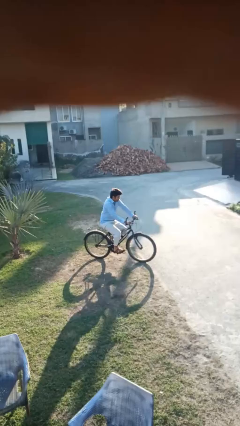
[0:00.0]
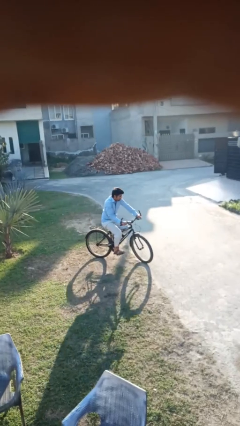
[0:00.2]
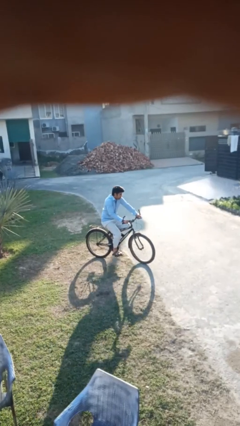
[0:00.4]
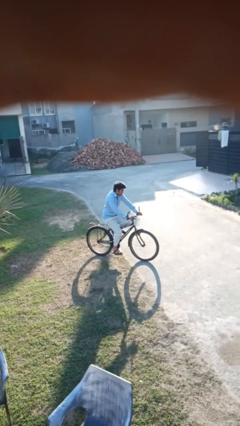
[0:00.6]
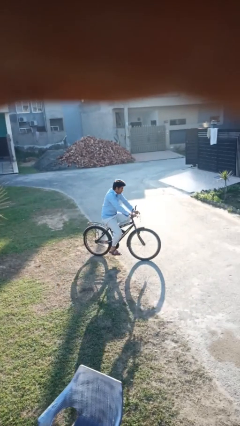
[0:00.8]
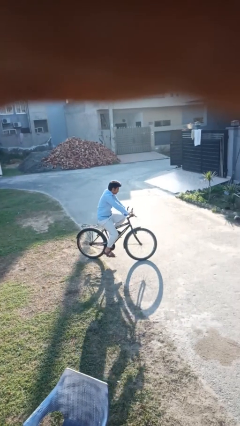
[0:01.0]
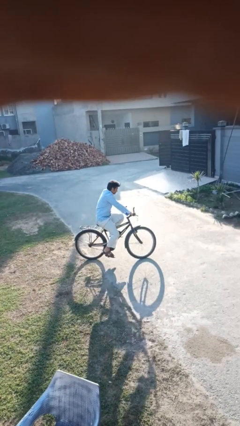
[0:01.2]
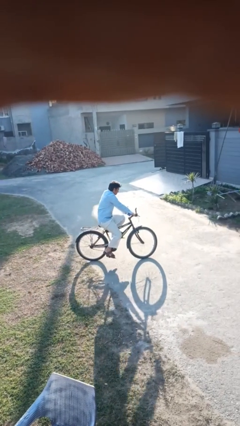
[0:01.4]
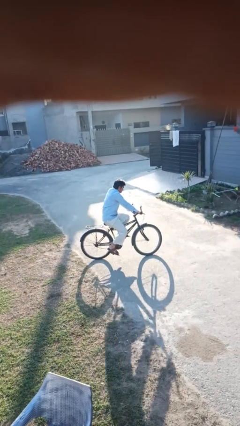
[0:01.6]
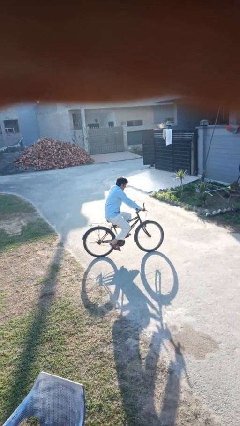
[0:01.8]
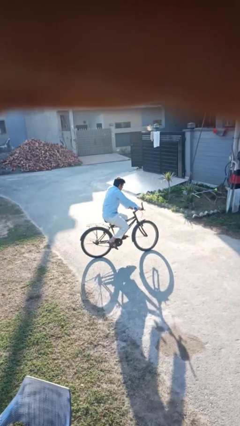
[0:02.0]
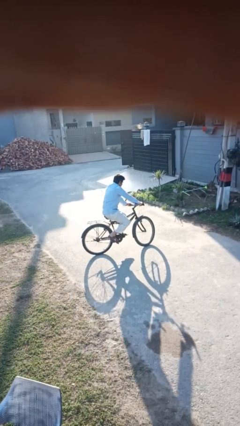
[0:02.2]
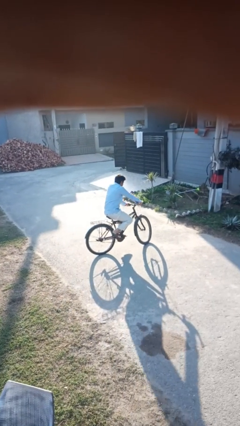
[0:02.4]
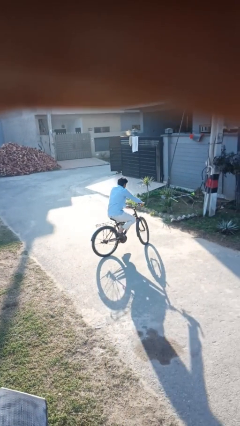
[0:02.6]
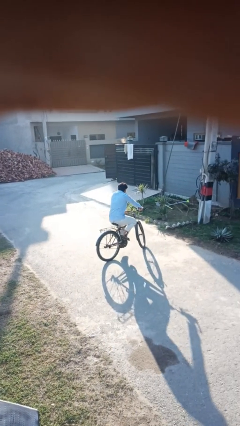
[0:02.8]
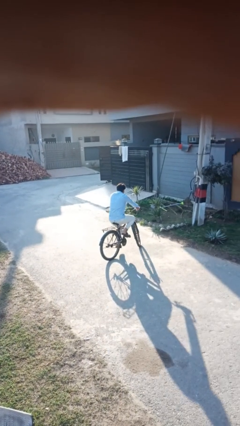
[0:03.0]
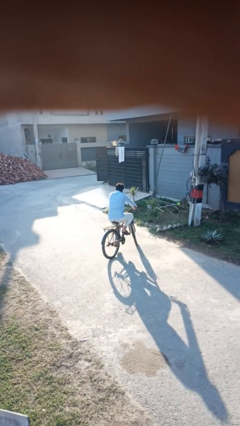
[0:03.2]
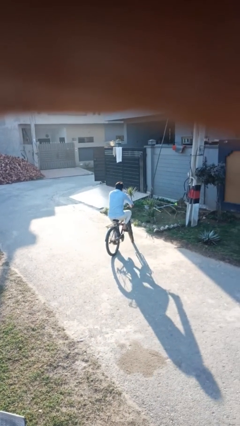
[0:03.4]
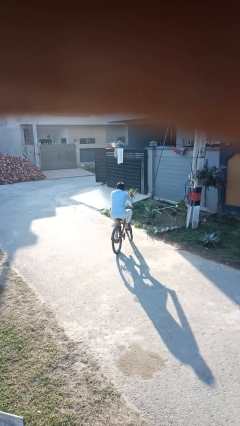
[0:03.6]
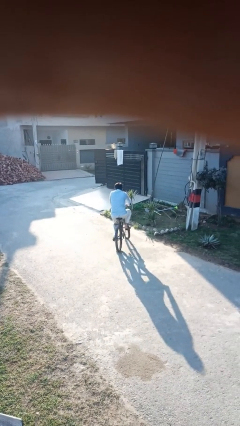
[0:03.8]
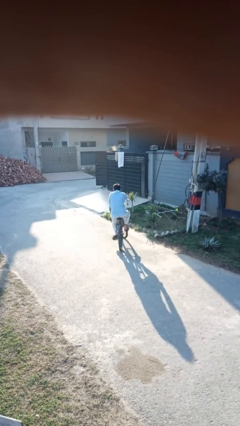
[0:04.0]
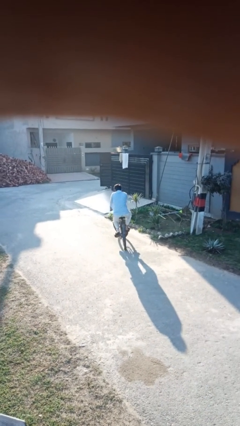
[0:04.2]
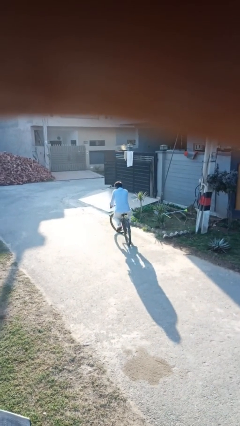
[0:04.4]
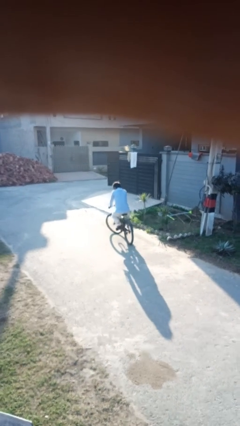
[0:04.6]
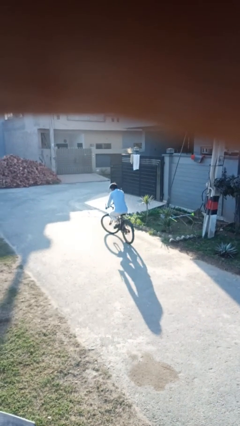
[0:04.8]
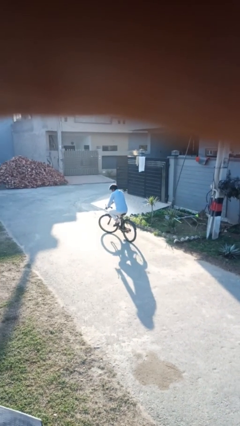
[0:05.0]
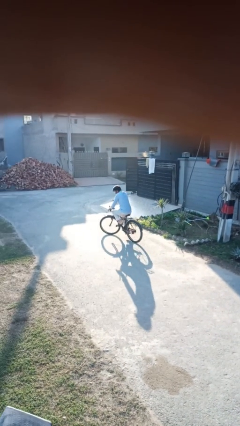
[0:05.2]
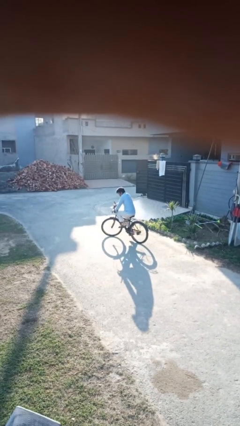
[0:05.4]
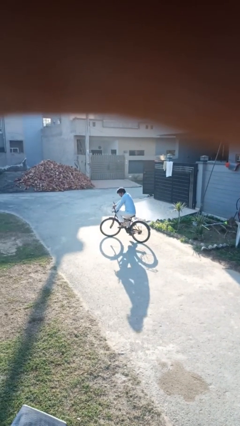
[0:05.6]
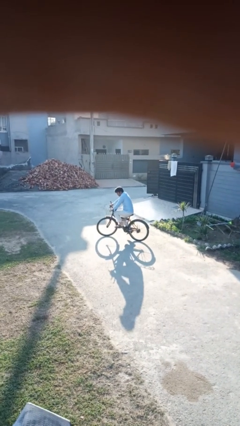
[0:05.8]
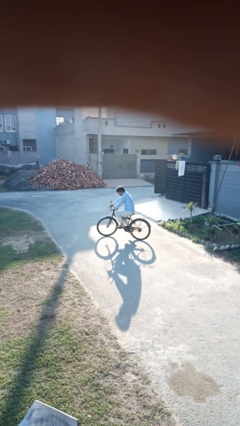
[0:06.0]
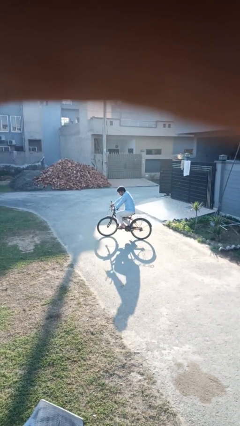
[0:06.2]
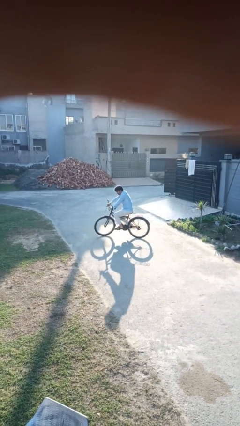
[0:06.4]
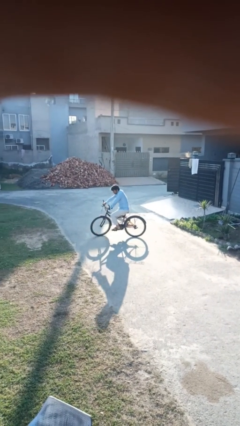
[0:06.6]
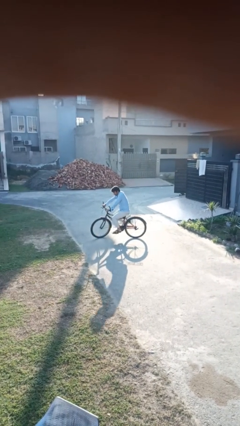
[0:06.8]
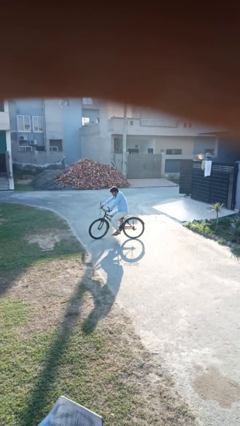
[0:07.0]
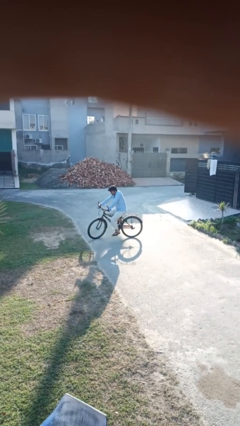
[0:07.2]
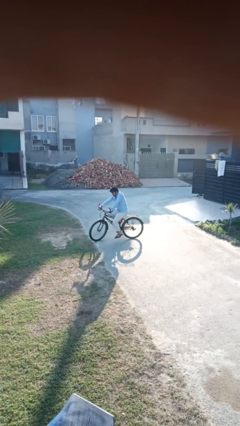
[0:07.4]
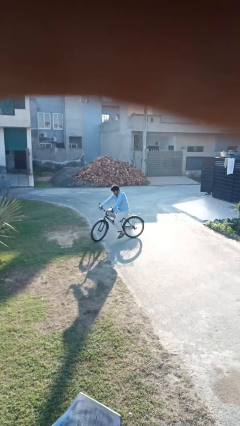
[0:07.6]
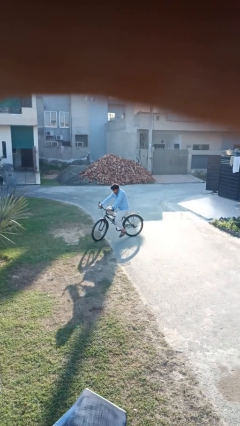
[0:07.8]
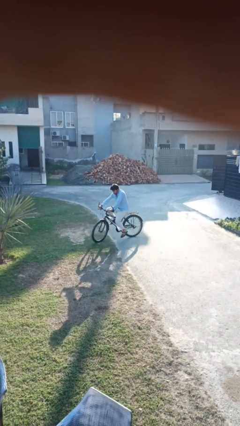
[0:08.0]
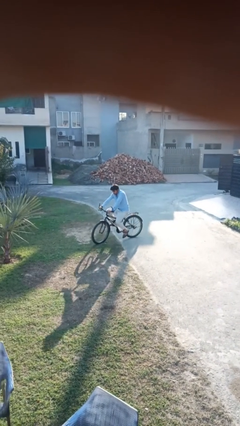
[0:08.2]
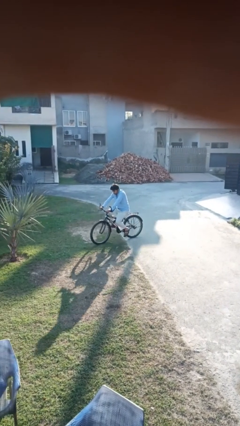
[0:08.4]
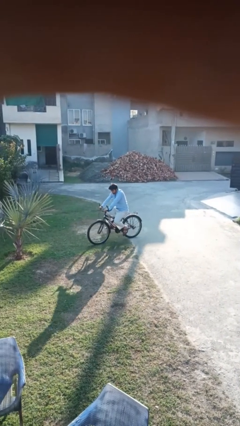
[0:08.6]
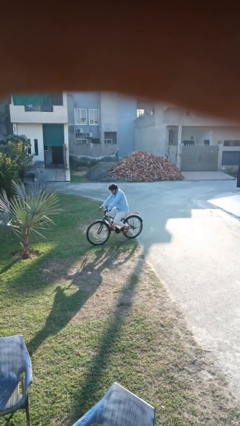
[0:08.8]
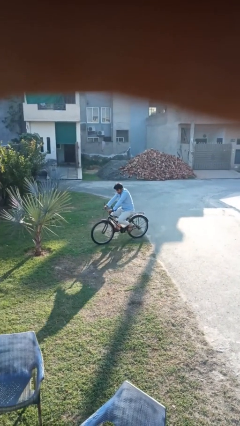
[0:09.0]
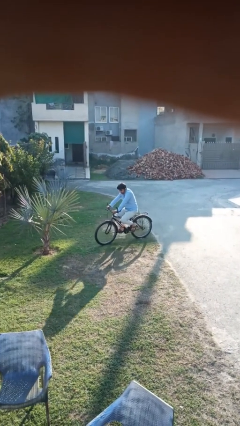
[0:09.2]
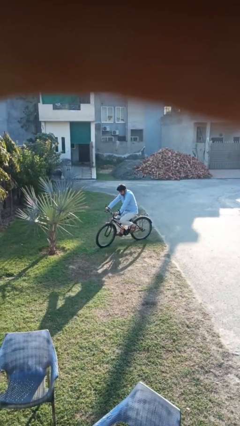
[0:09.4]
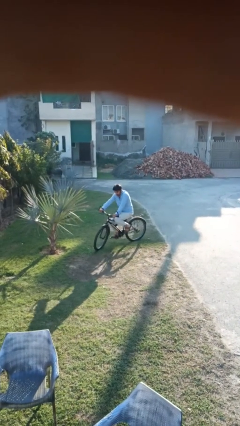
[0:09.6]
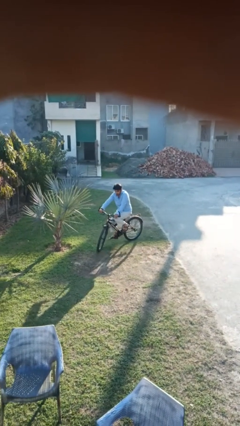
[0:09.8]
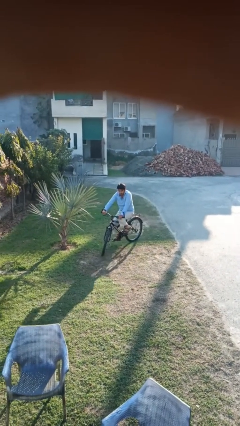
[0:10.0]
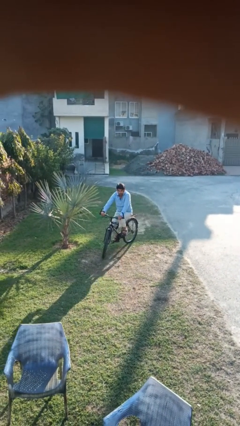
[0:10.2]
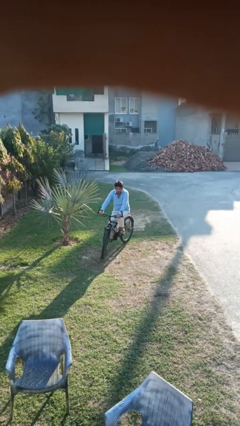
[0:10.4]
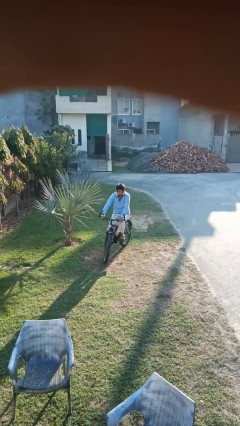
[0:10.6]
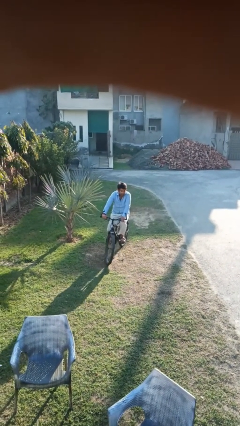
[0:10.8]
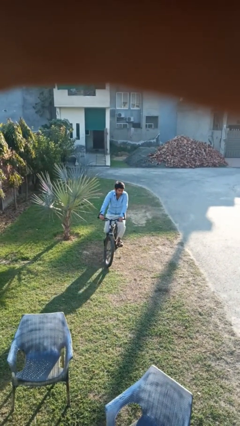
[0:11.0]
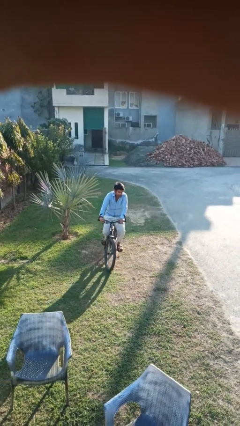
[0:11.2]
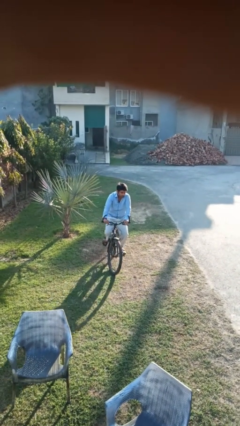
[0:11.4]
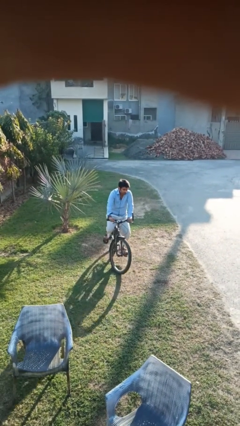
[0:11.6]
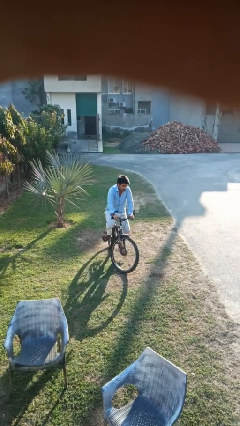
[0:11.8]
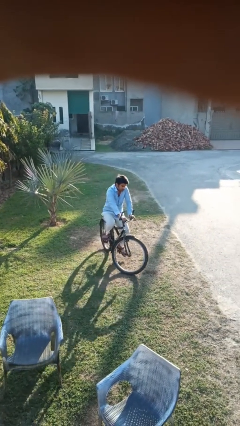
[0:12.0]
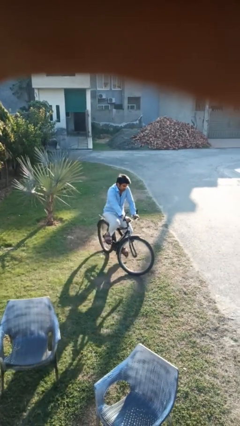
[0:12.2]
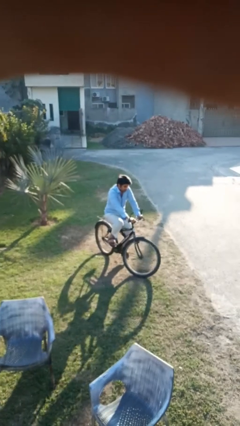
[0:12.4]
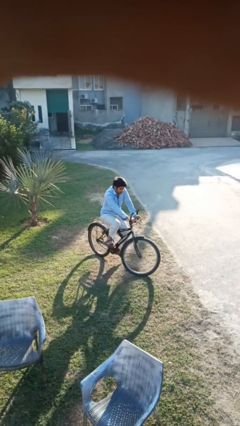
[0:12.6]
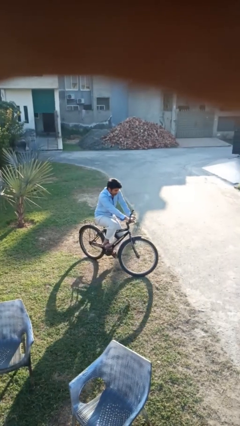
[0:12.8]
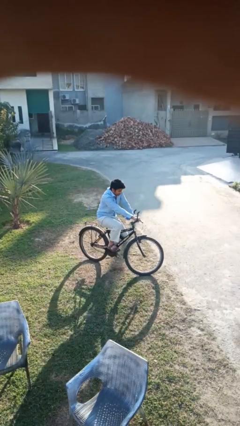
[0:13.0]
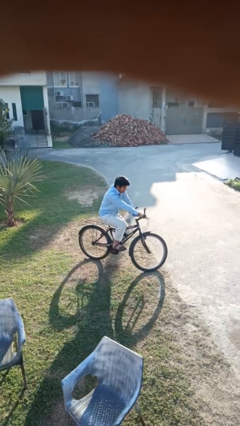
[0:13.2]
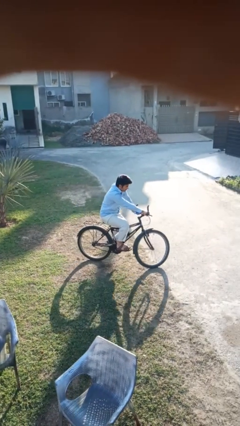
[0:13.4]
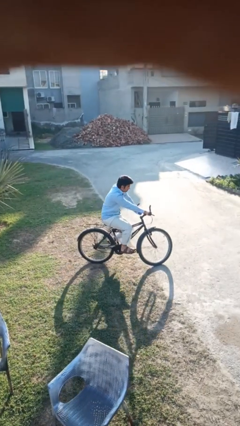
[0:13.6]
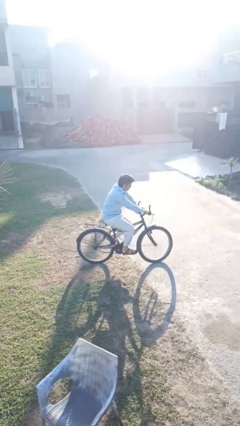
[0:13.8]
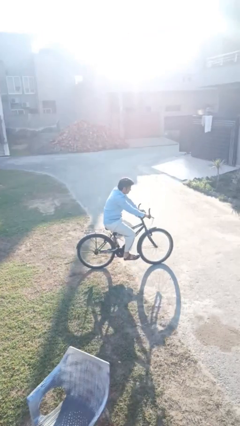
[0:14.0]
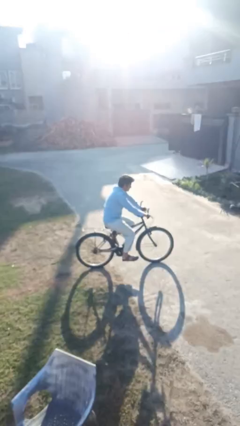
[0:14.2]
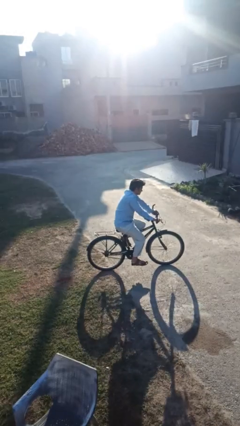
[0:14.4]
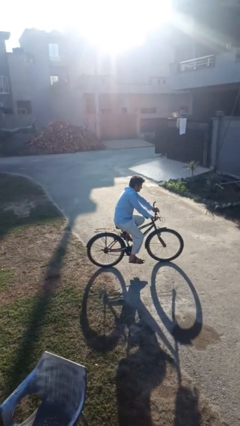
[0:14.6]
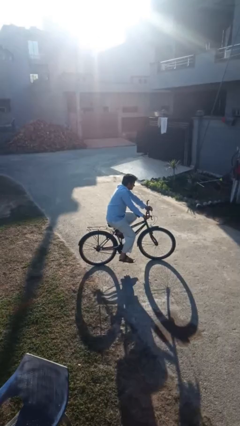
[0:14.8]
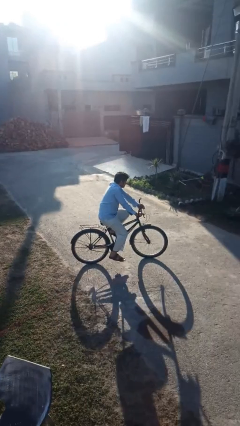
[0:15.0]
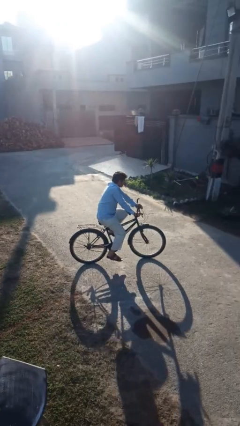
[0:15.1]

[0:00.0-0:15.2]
person rides bicycle

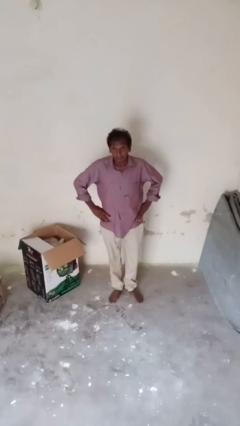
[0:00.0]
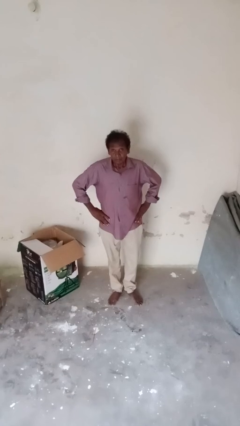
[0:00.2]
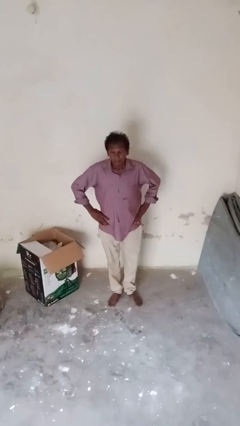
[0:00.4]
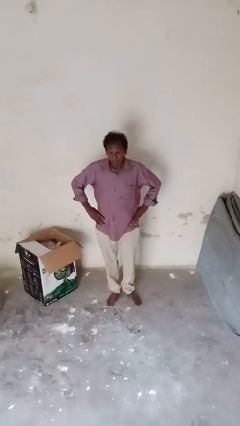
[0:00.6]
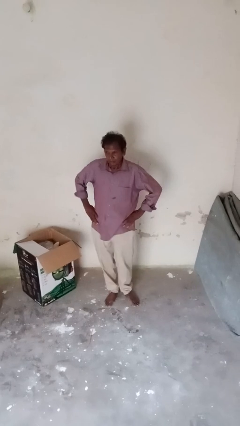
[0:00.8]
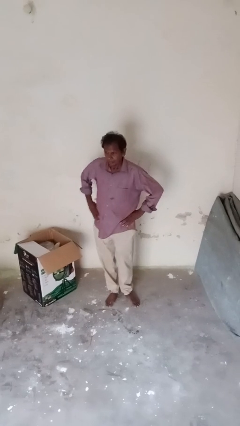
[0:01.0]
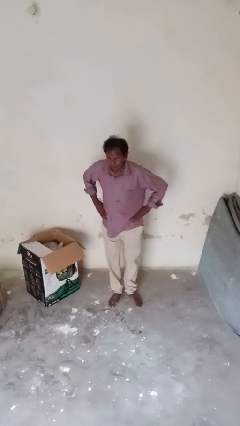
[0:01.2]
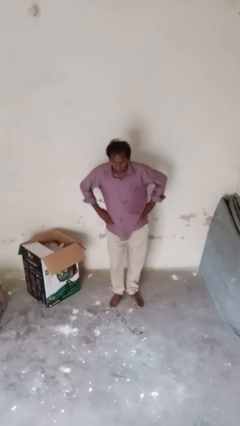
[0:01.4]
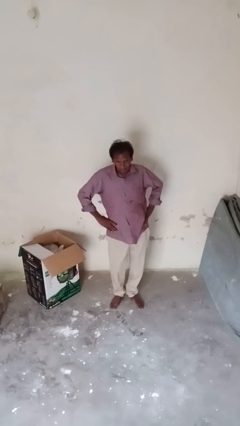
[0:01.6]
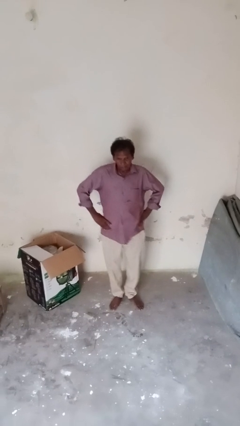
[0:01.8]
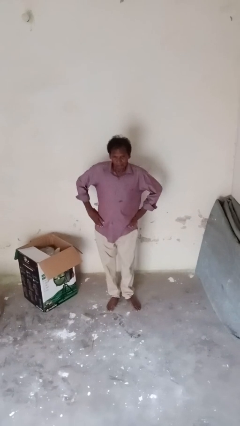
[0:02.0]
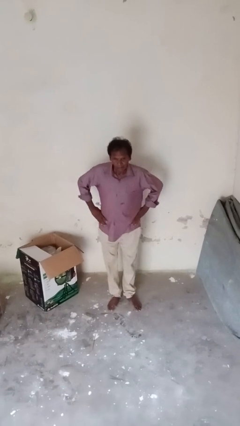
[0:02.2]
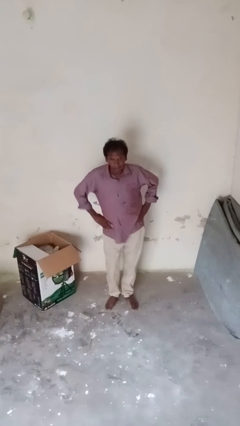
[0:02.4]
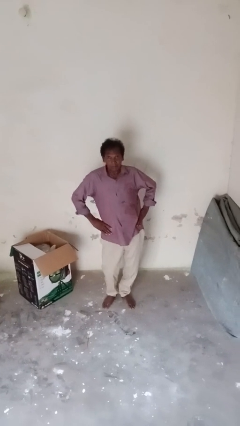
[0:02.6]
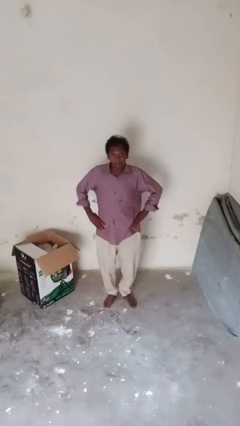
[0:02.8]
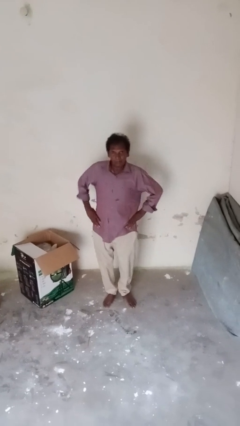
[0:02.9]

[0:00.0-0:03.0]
person wiggles hips
